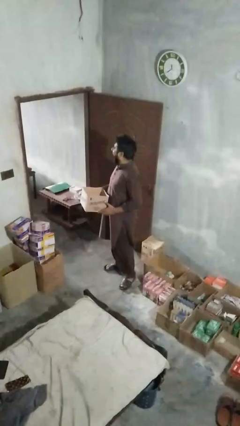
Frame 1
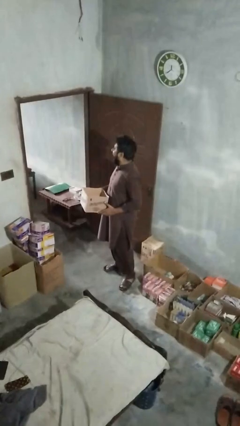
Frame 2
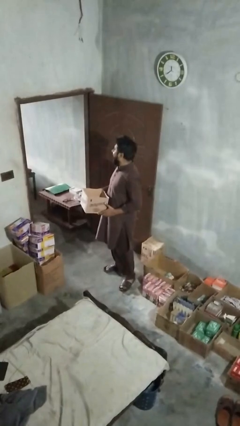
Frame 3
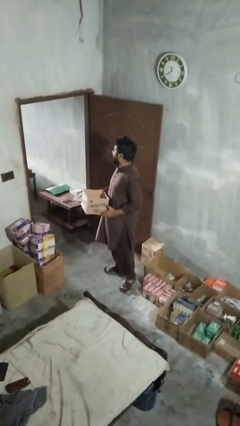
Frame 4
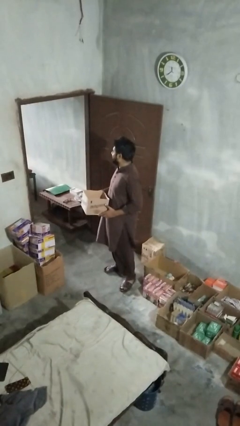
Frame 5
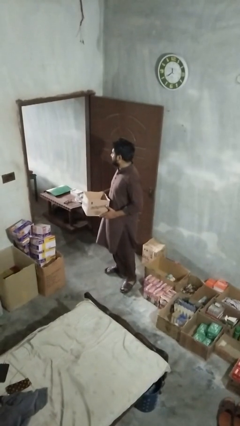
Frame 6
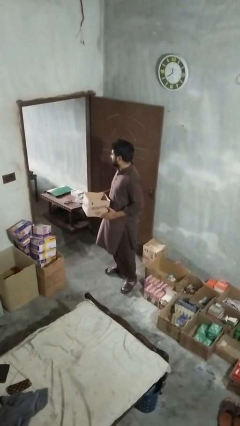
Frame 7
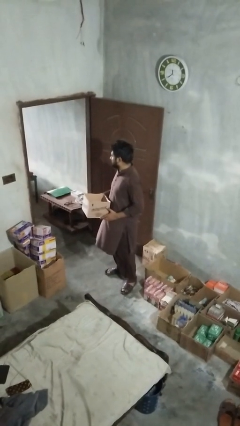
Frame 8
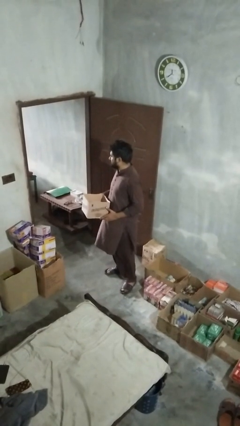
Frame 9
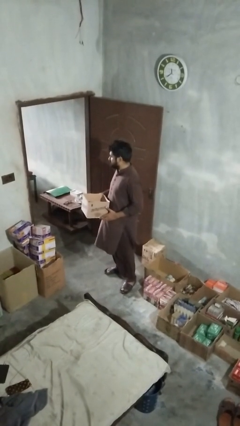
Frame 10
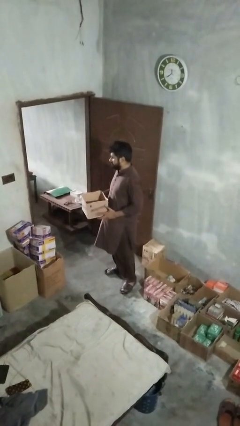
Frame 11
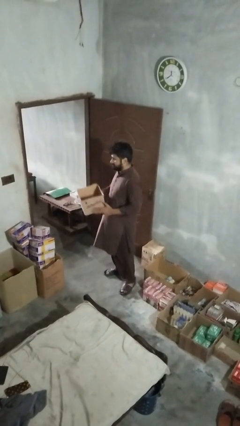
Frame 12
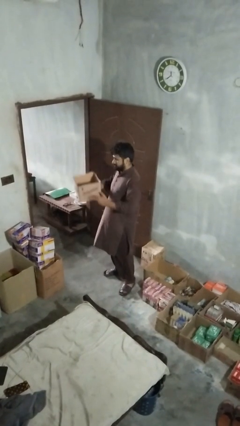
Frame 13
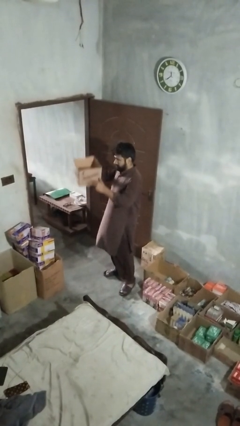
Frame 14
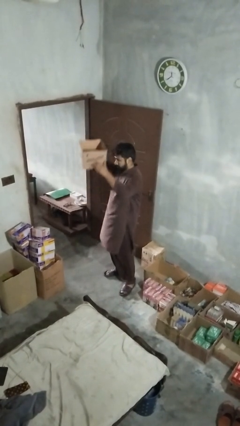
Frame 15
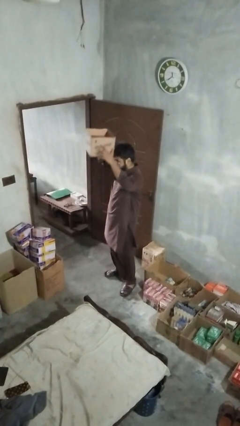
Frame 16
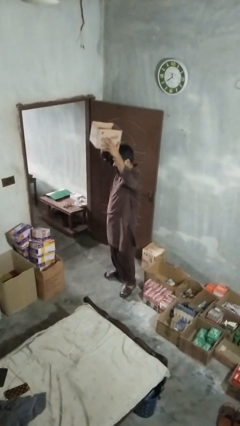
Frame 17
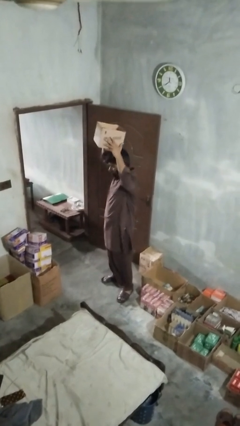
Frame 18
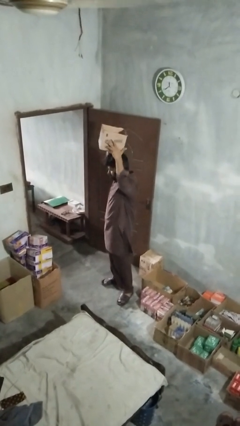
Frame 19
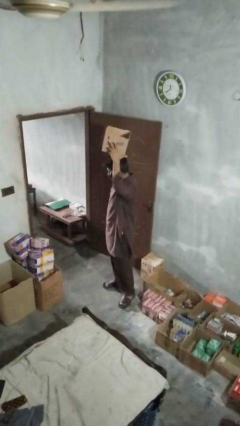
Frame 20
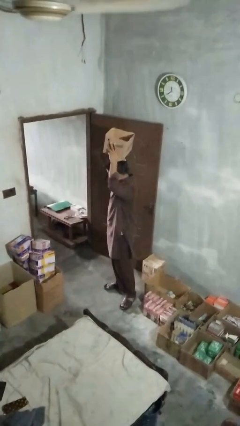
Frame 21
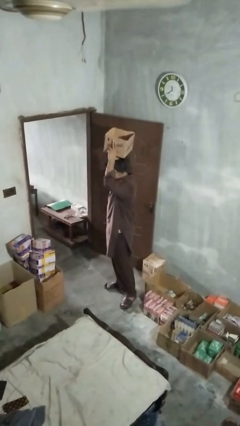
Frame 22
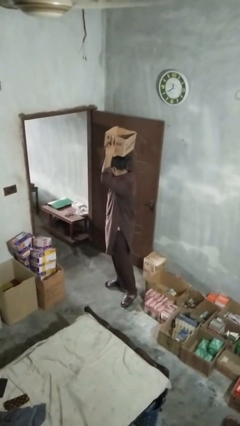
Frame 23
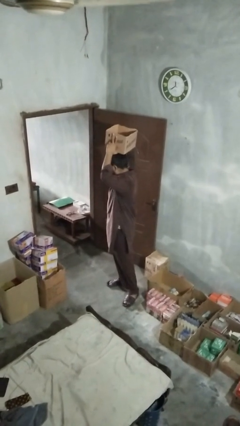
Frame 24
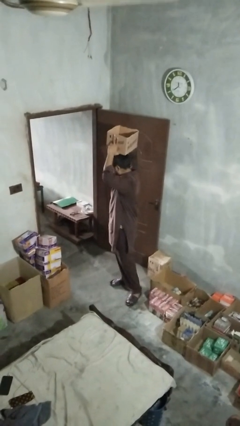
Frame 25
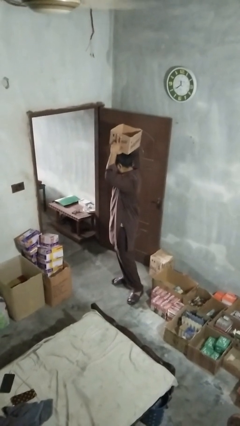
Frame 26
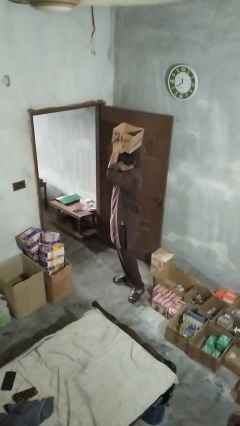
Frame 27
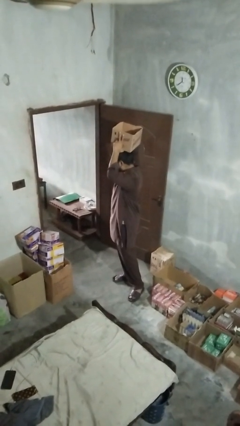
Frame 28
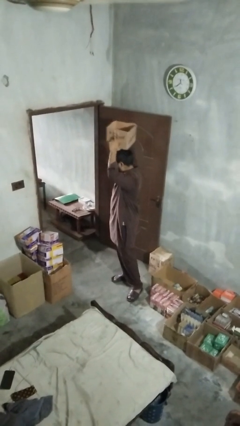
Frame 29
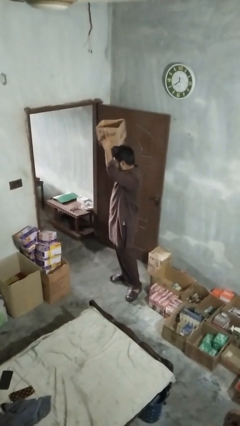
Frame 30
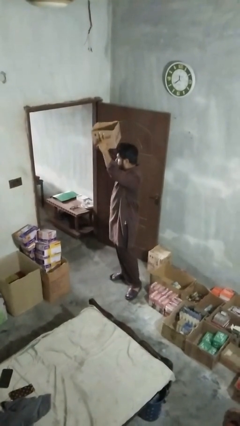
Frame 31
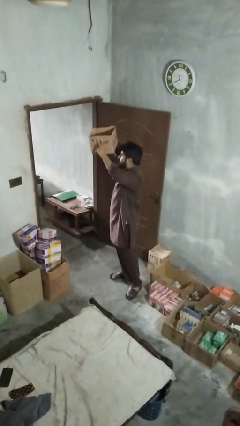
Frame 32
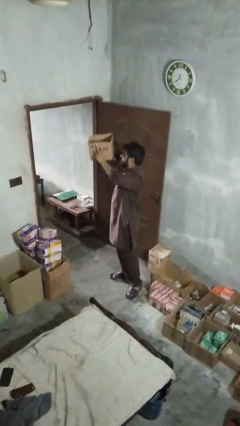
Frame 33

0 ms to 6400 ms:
person holds object above head

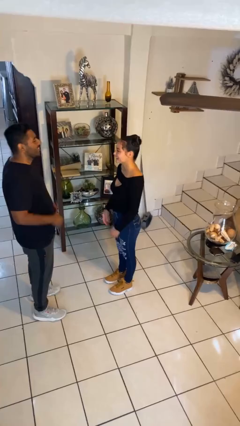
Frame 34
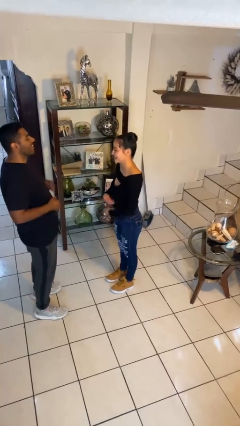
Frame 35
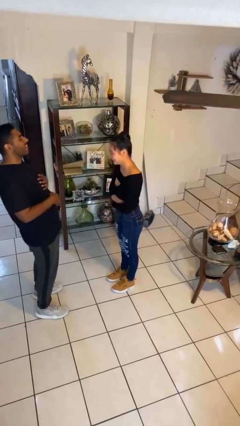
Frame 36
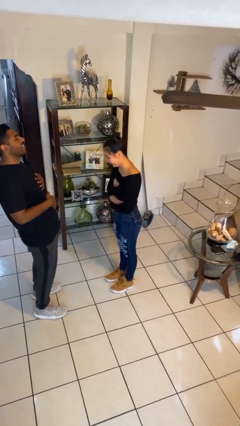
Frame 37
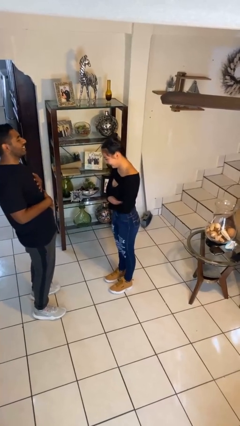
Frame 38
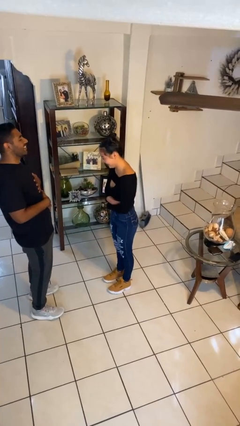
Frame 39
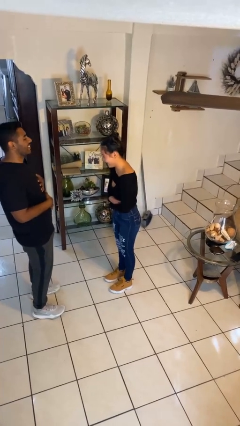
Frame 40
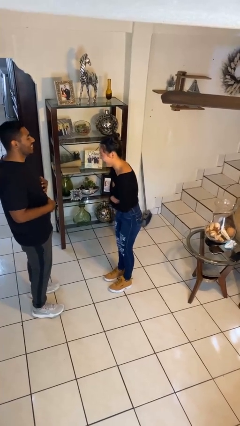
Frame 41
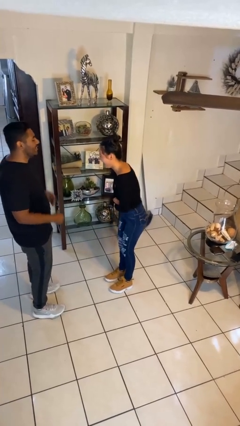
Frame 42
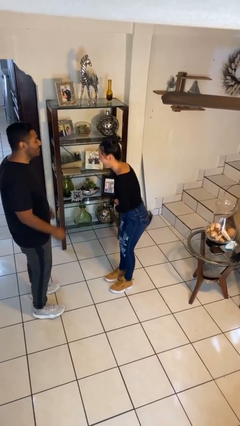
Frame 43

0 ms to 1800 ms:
person laughs with person

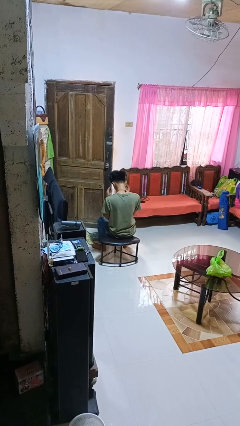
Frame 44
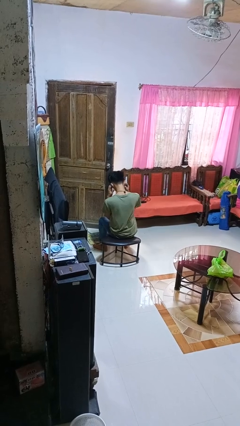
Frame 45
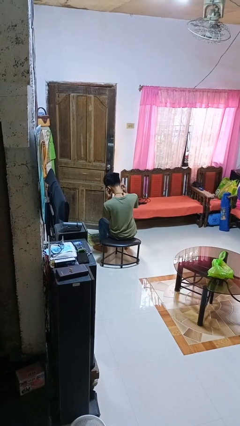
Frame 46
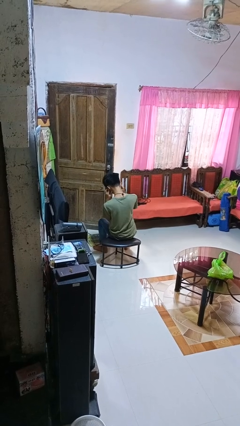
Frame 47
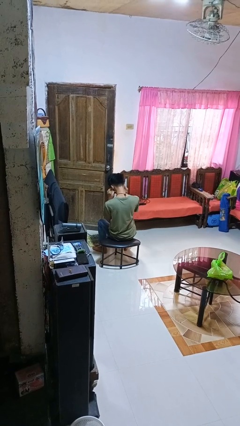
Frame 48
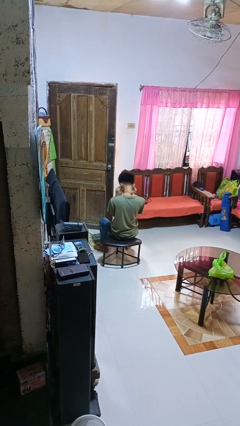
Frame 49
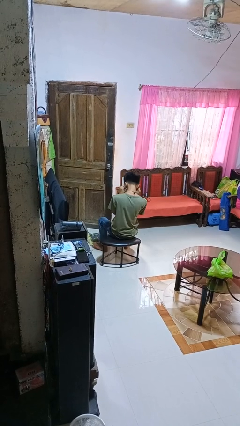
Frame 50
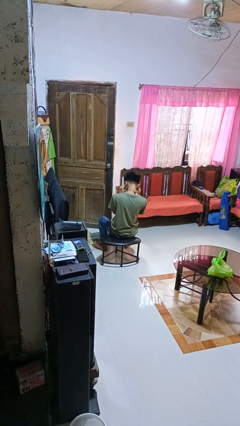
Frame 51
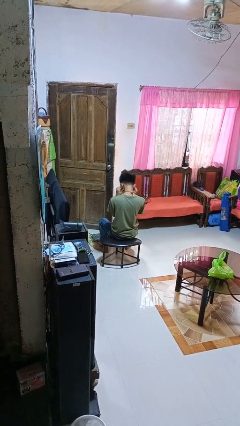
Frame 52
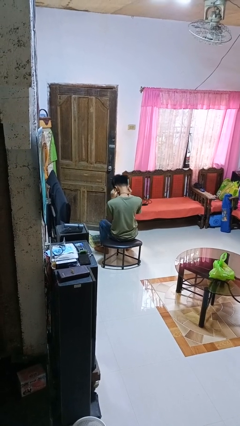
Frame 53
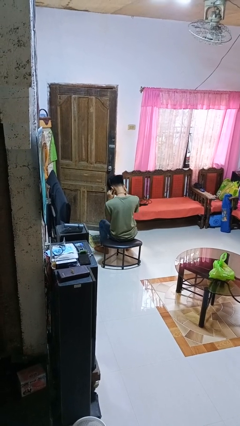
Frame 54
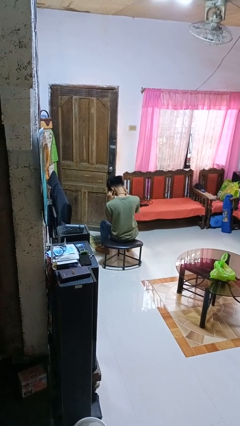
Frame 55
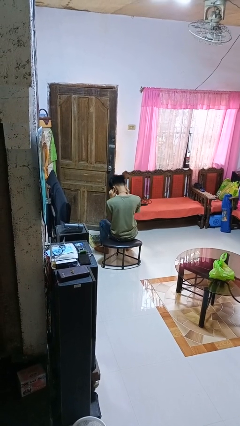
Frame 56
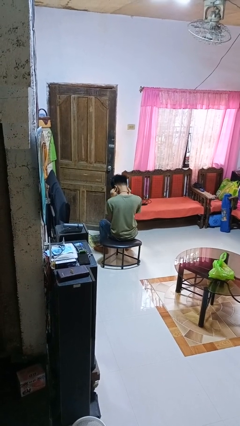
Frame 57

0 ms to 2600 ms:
person puts fingers in ear

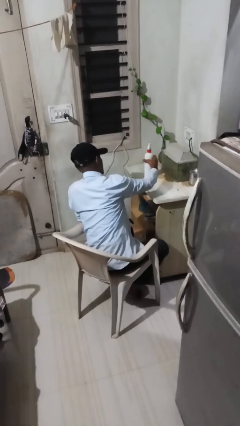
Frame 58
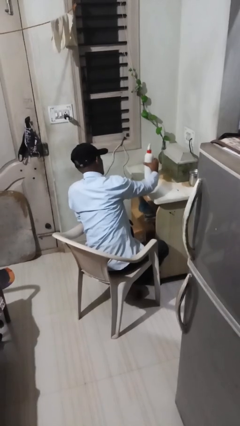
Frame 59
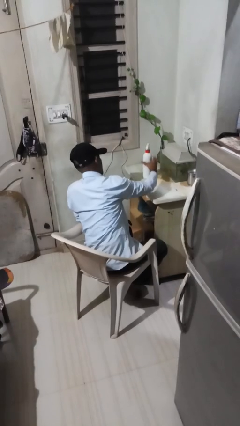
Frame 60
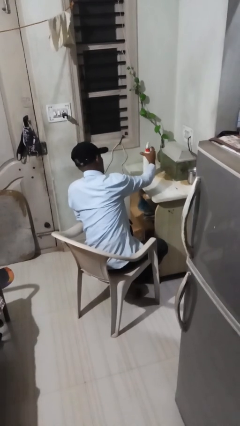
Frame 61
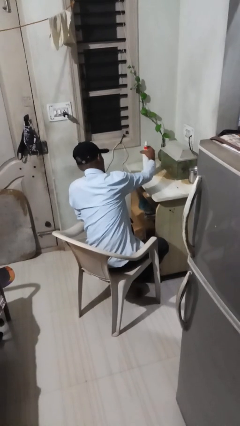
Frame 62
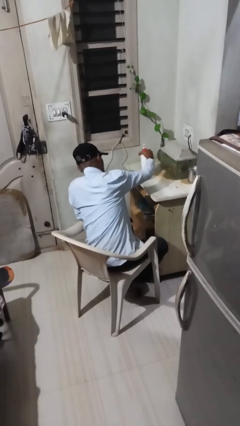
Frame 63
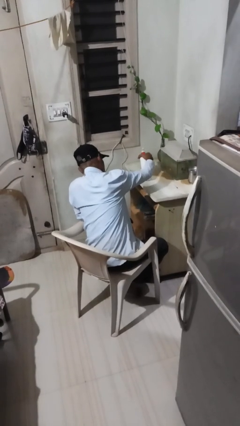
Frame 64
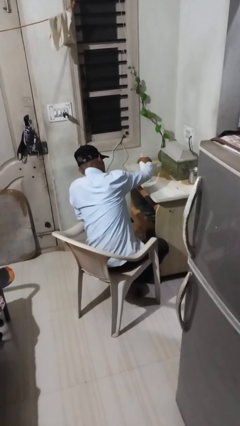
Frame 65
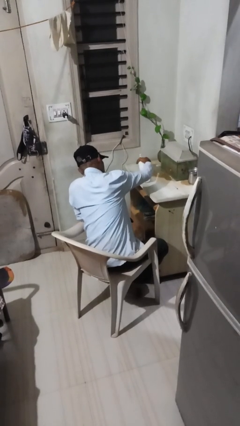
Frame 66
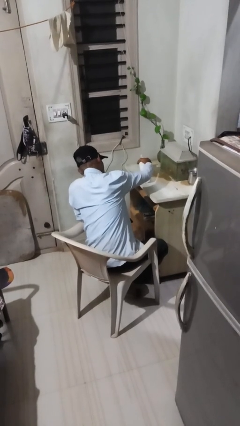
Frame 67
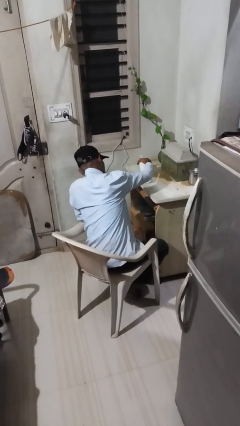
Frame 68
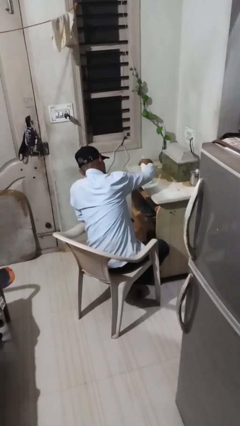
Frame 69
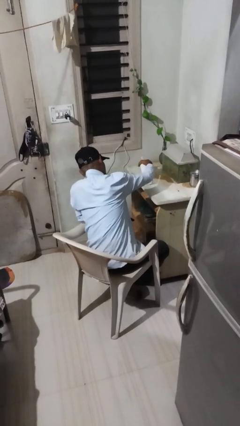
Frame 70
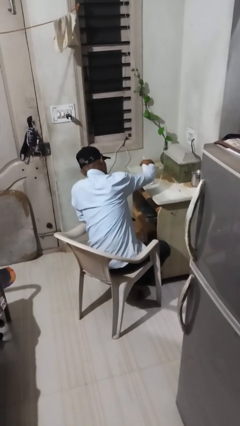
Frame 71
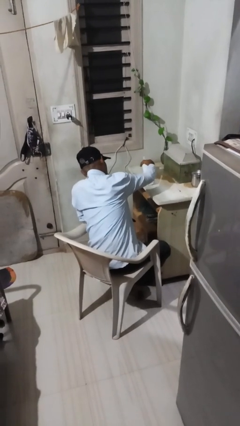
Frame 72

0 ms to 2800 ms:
person sprays from bottle

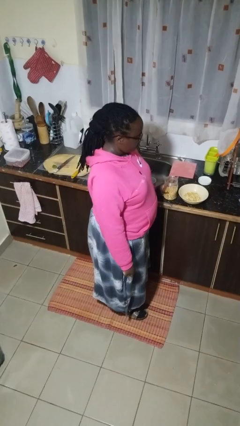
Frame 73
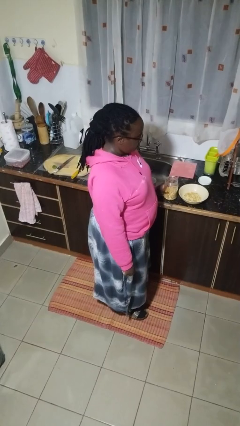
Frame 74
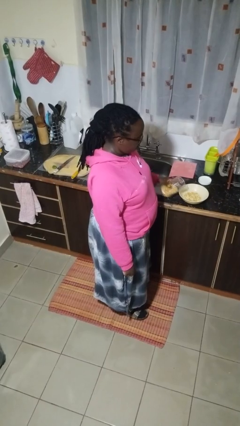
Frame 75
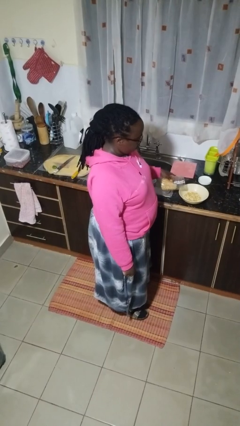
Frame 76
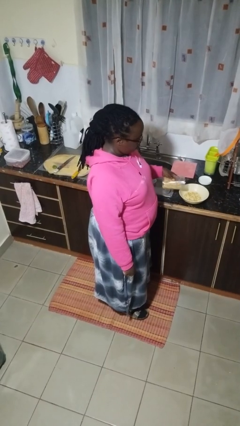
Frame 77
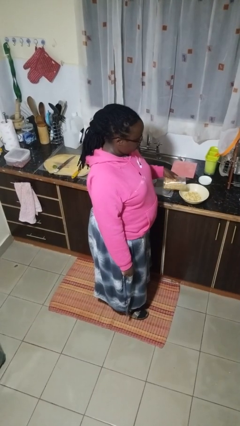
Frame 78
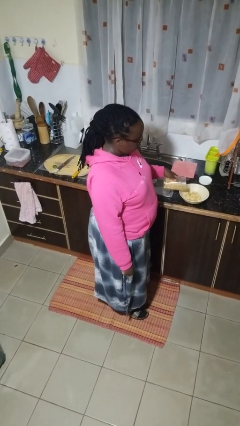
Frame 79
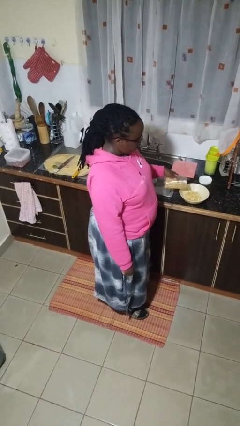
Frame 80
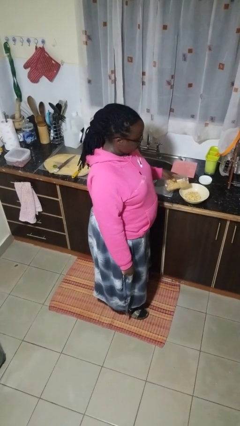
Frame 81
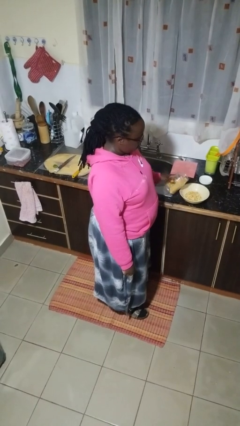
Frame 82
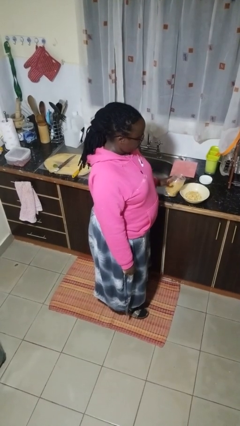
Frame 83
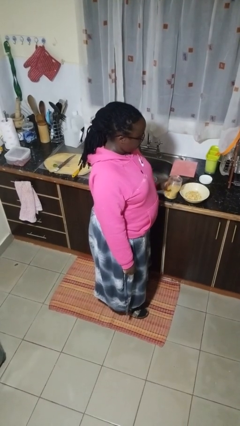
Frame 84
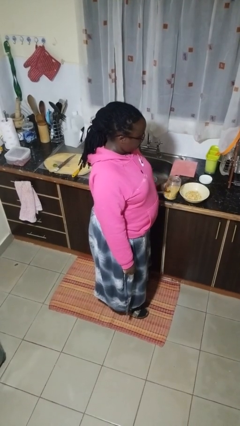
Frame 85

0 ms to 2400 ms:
person pours into bowl

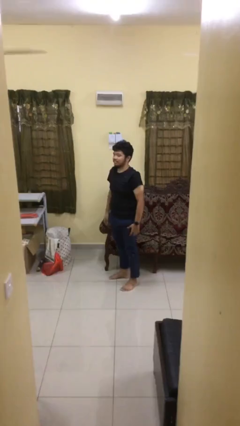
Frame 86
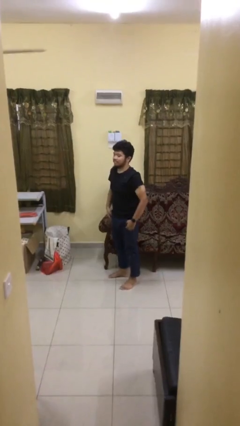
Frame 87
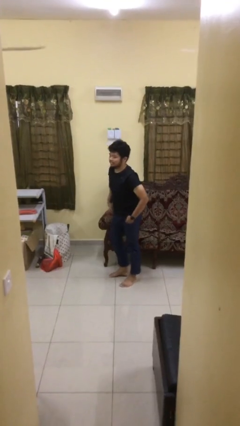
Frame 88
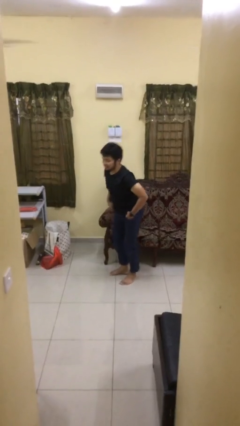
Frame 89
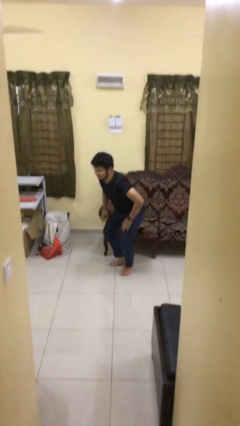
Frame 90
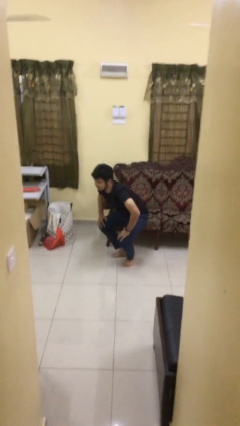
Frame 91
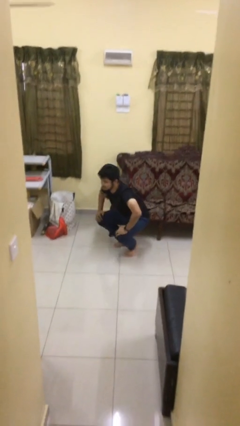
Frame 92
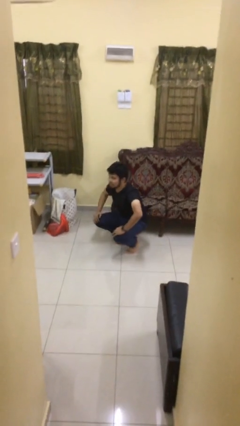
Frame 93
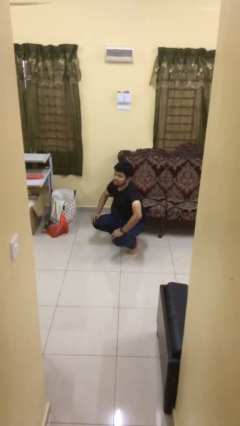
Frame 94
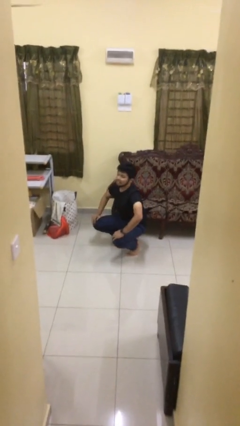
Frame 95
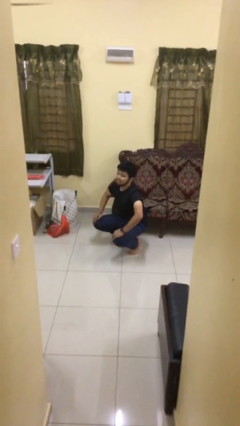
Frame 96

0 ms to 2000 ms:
person squats
